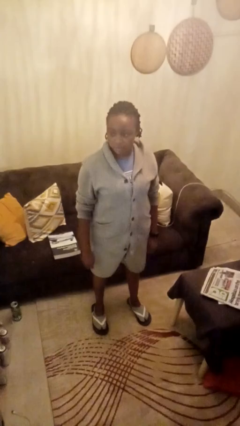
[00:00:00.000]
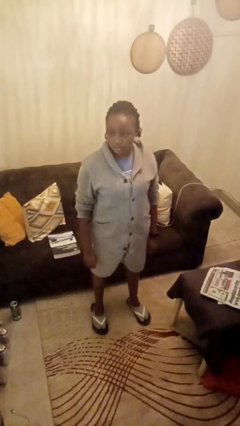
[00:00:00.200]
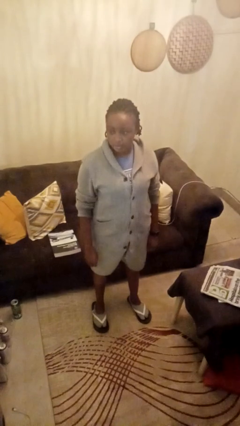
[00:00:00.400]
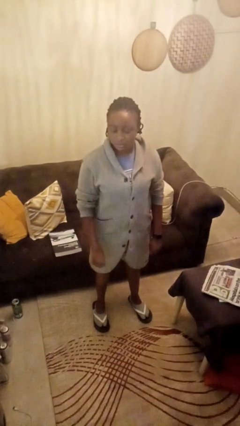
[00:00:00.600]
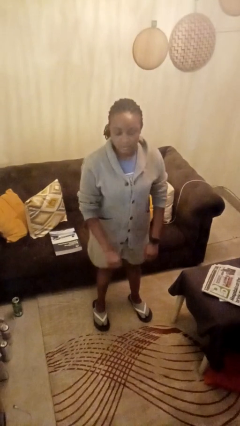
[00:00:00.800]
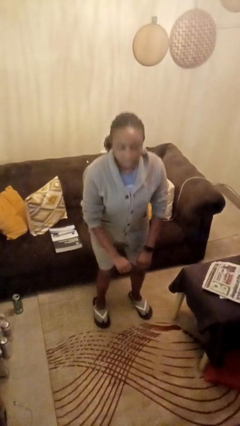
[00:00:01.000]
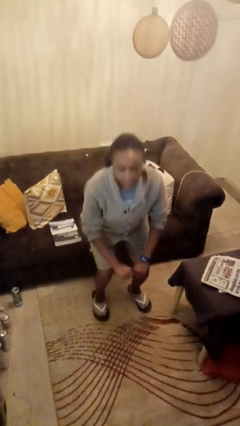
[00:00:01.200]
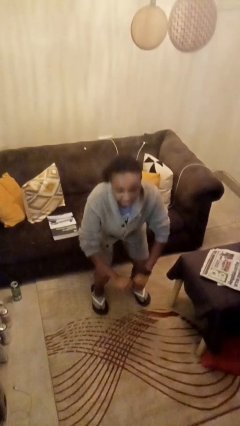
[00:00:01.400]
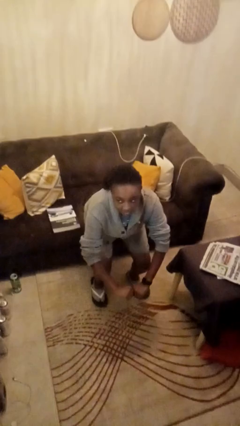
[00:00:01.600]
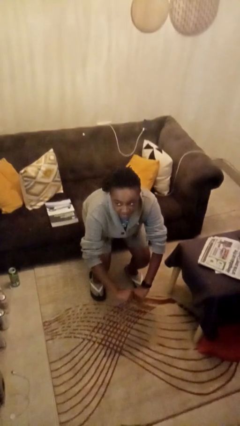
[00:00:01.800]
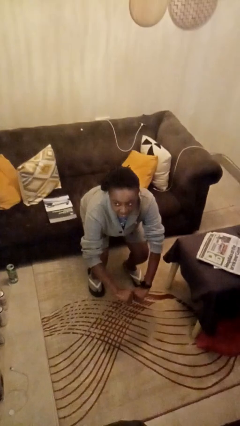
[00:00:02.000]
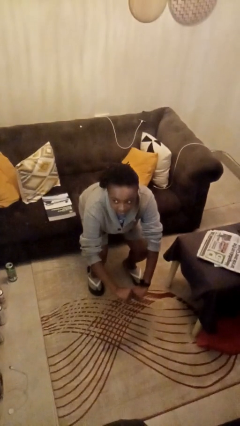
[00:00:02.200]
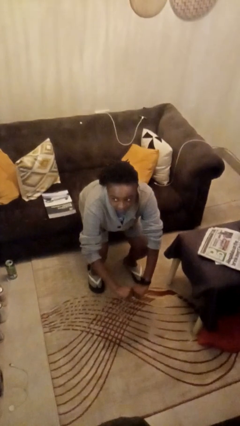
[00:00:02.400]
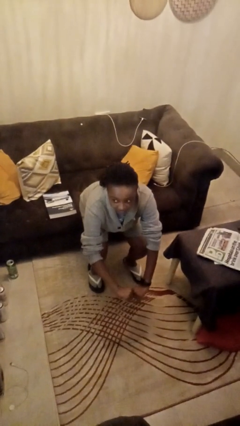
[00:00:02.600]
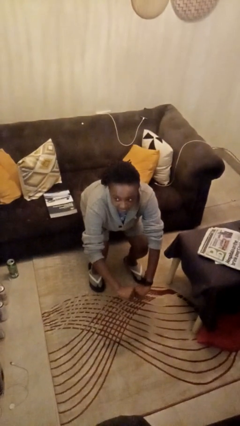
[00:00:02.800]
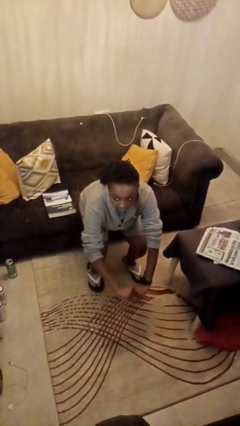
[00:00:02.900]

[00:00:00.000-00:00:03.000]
person squats

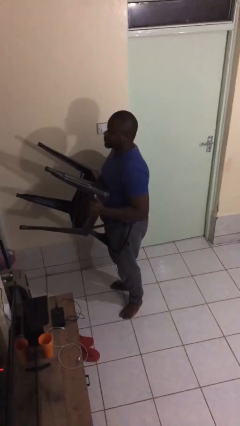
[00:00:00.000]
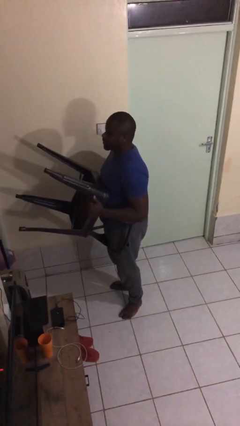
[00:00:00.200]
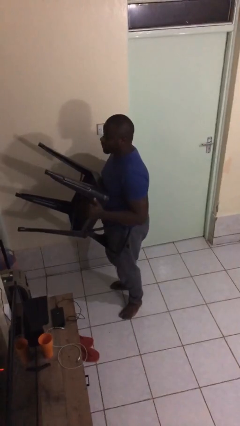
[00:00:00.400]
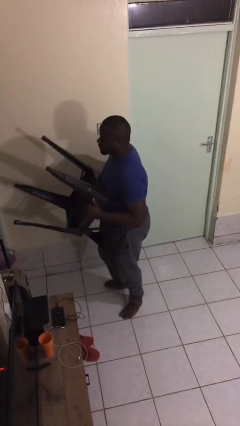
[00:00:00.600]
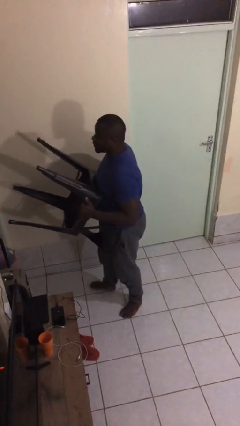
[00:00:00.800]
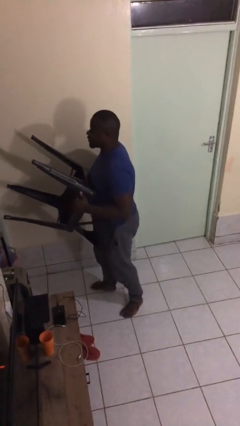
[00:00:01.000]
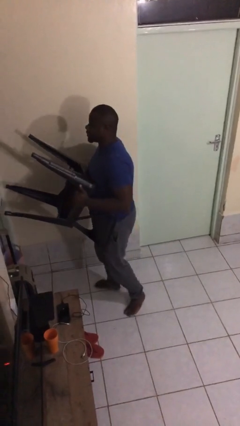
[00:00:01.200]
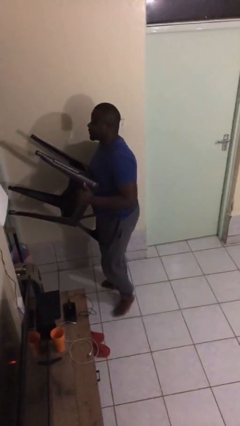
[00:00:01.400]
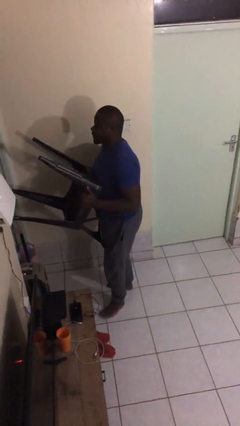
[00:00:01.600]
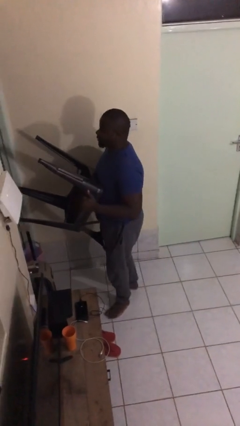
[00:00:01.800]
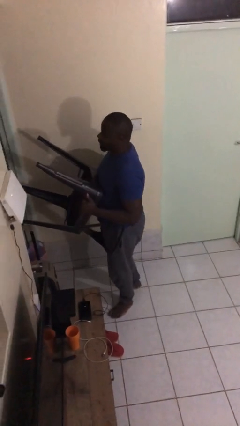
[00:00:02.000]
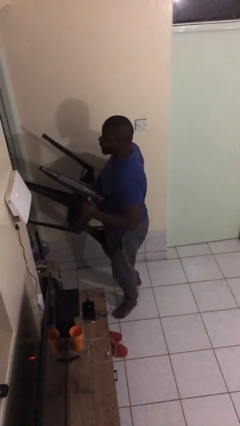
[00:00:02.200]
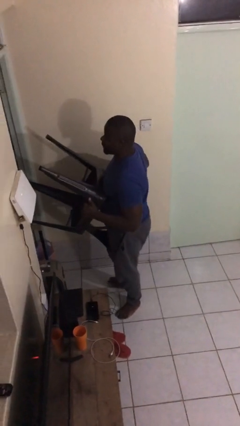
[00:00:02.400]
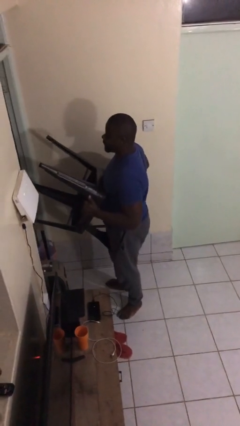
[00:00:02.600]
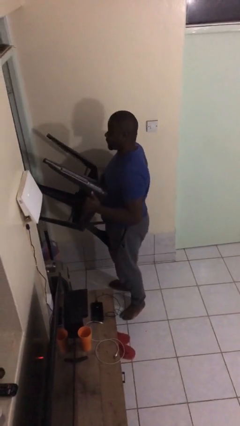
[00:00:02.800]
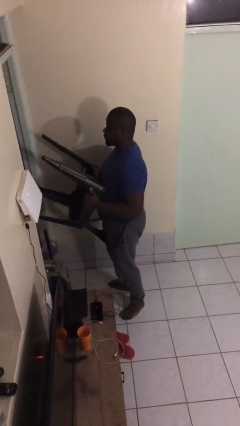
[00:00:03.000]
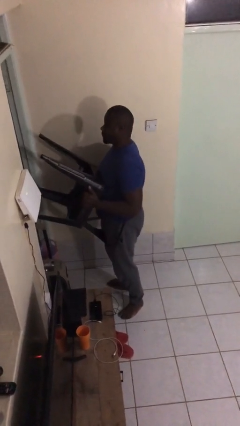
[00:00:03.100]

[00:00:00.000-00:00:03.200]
person carries furniture

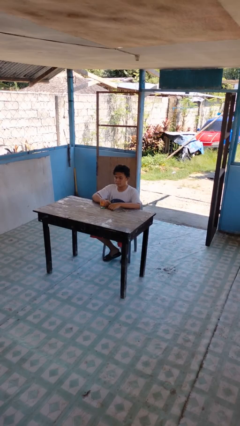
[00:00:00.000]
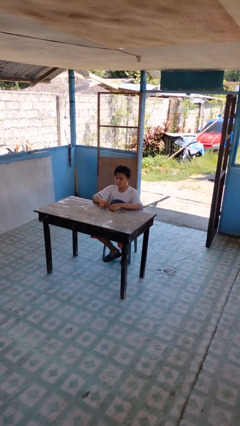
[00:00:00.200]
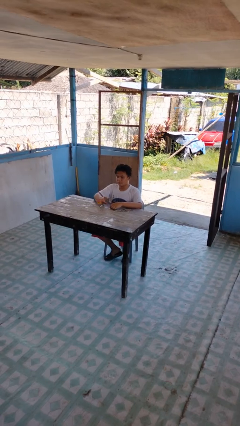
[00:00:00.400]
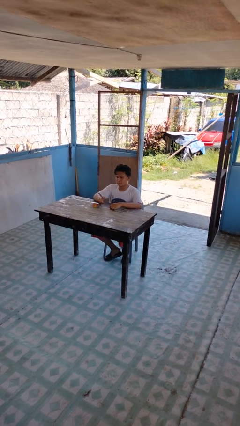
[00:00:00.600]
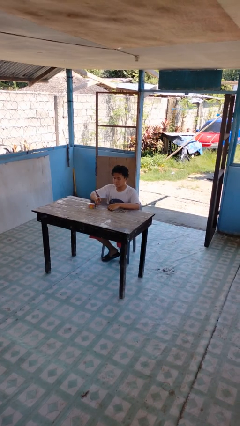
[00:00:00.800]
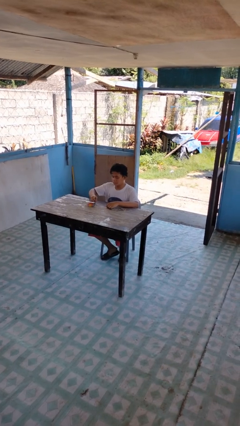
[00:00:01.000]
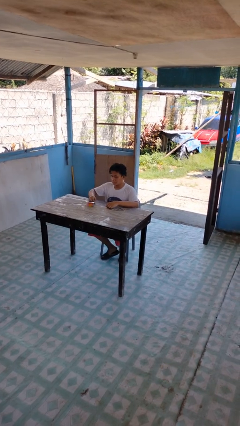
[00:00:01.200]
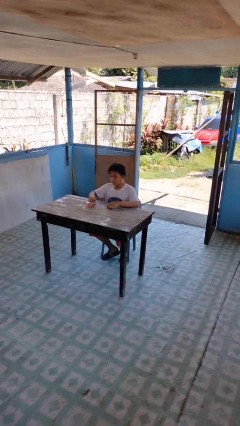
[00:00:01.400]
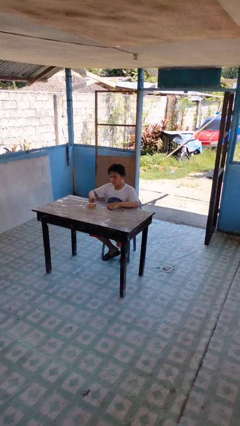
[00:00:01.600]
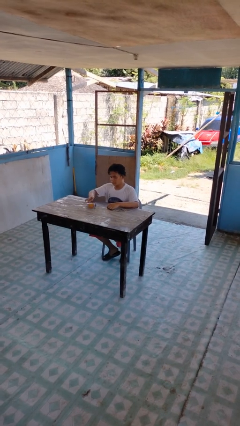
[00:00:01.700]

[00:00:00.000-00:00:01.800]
person knocks over glass

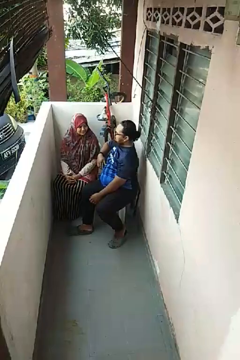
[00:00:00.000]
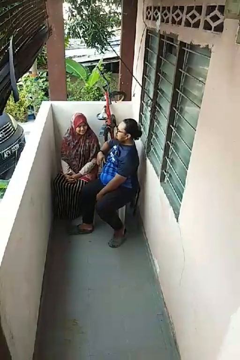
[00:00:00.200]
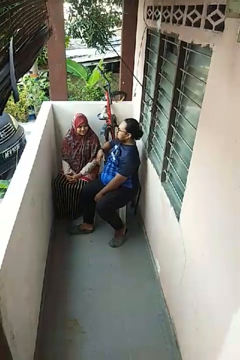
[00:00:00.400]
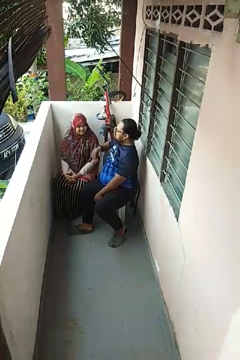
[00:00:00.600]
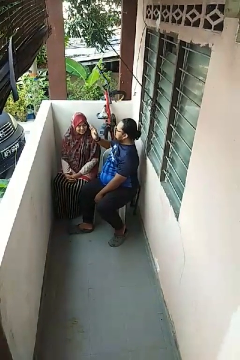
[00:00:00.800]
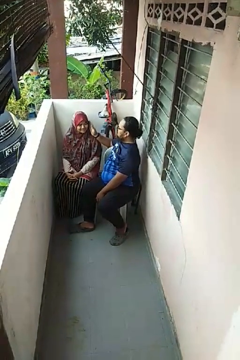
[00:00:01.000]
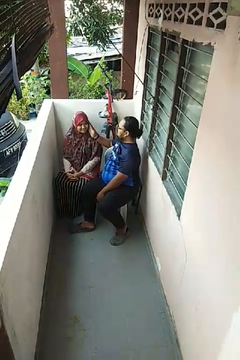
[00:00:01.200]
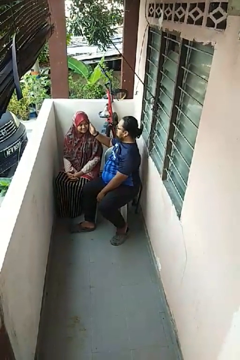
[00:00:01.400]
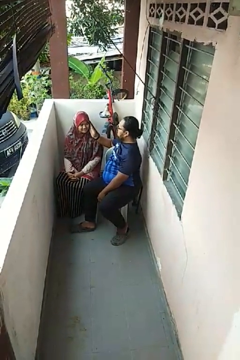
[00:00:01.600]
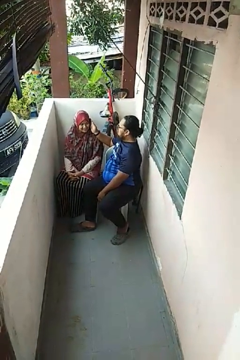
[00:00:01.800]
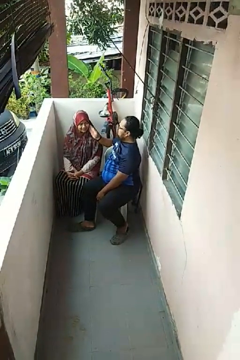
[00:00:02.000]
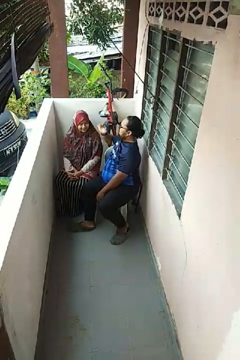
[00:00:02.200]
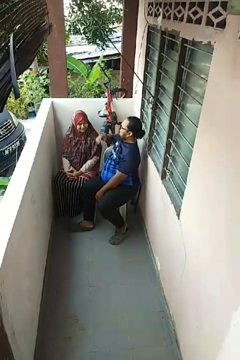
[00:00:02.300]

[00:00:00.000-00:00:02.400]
person touches face of person

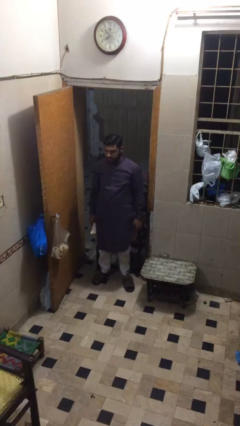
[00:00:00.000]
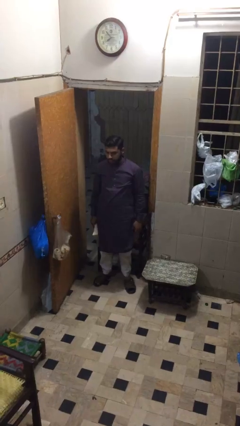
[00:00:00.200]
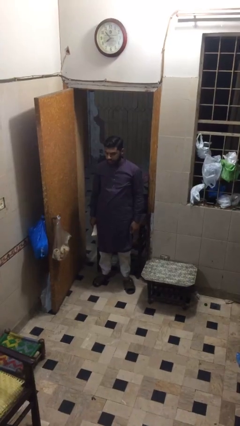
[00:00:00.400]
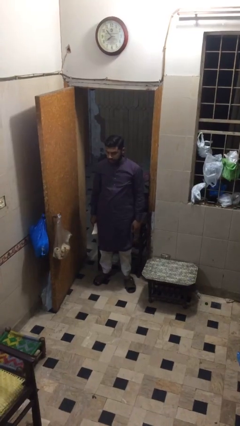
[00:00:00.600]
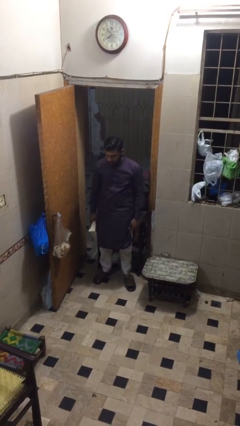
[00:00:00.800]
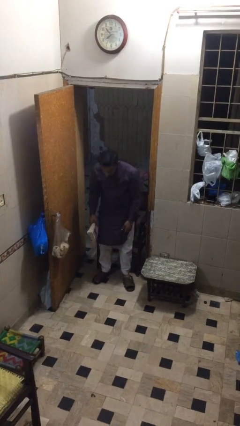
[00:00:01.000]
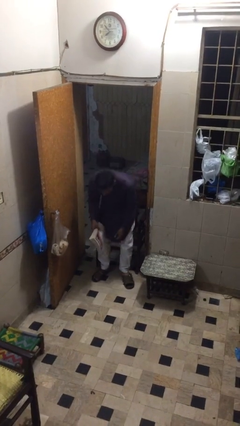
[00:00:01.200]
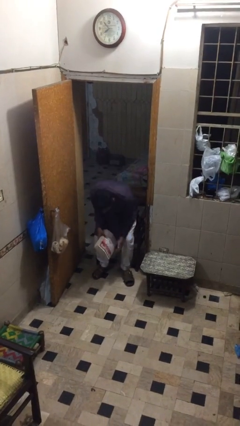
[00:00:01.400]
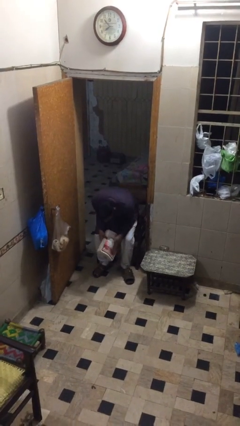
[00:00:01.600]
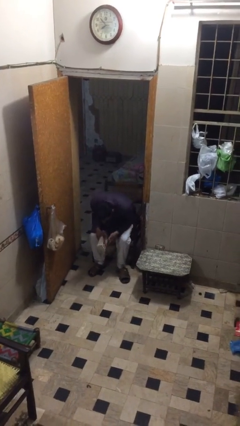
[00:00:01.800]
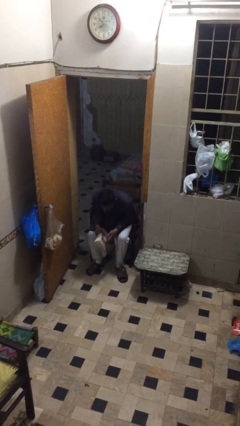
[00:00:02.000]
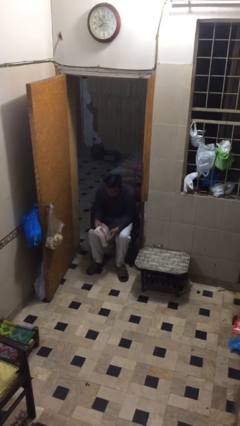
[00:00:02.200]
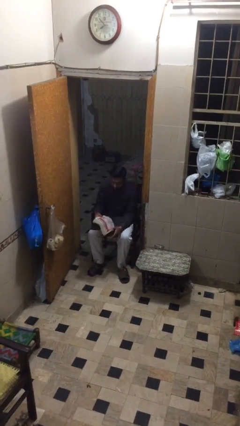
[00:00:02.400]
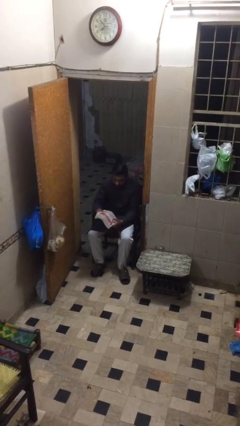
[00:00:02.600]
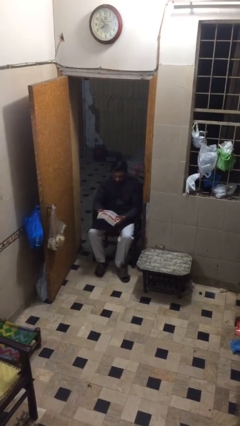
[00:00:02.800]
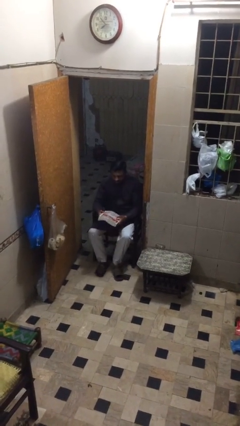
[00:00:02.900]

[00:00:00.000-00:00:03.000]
person sits down

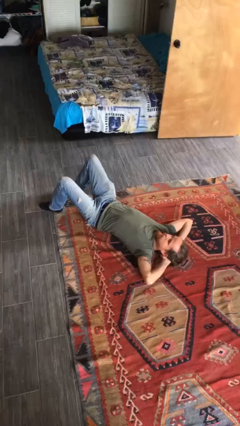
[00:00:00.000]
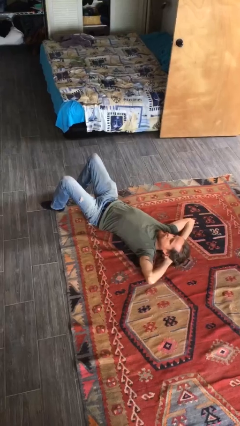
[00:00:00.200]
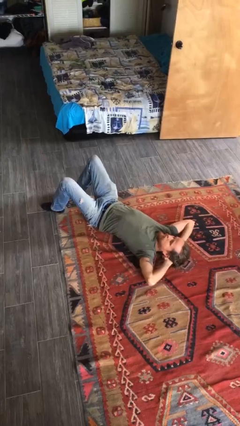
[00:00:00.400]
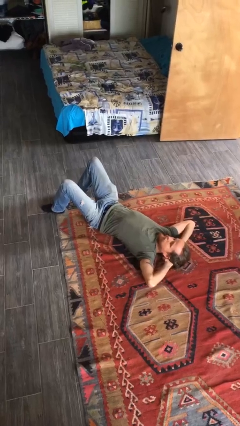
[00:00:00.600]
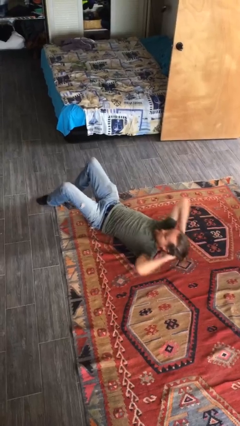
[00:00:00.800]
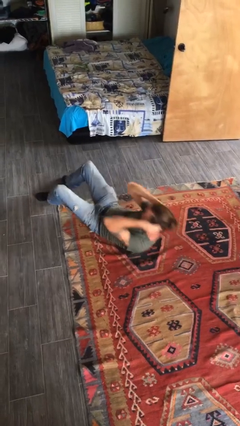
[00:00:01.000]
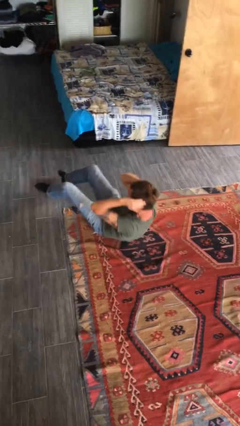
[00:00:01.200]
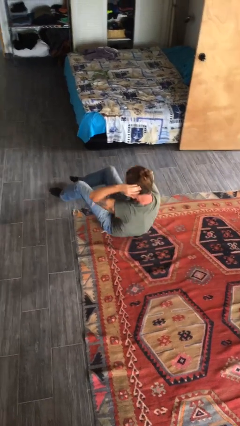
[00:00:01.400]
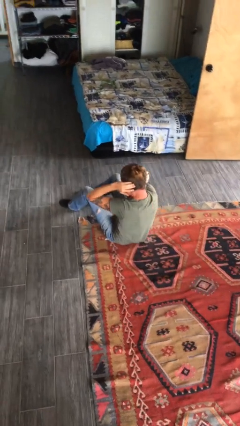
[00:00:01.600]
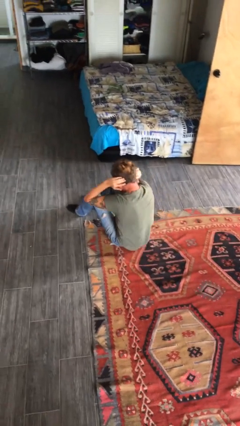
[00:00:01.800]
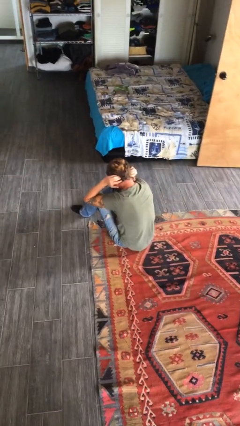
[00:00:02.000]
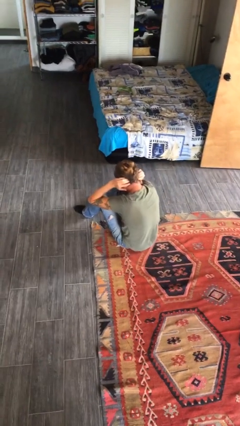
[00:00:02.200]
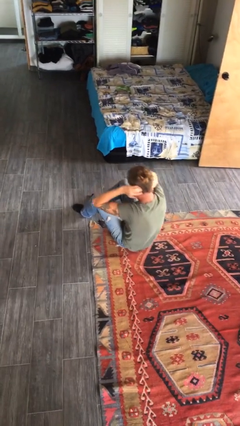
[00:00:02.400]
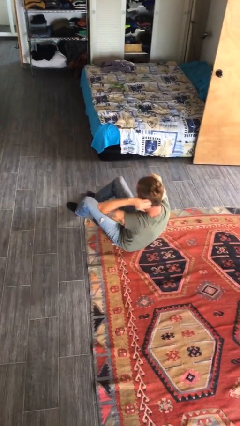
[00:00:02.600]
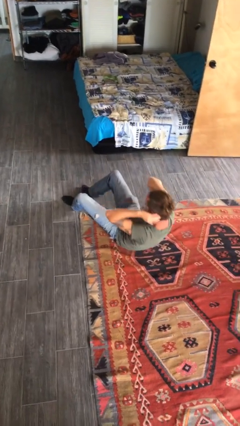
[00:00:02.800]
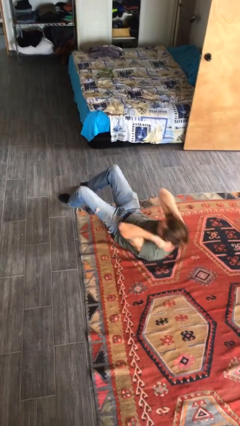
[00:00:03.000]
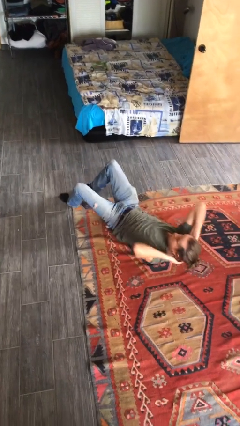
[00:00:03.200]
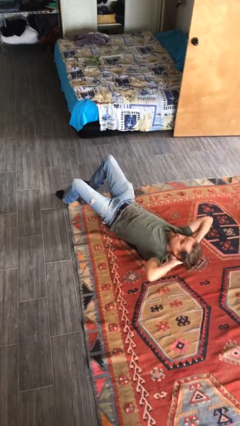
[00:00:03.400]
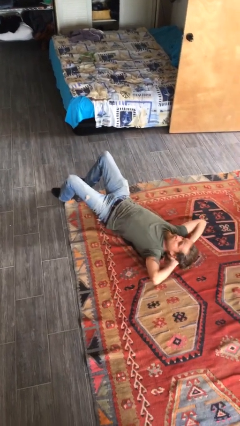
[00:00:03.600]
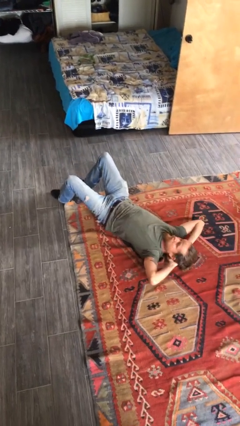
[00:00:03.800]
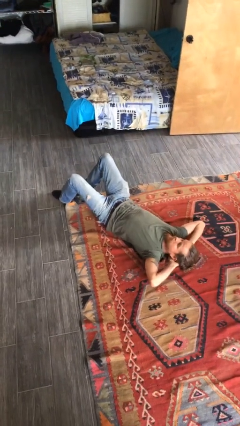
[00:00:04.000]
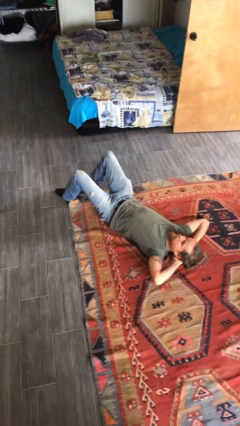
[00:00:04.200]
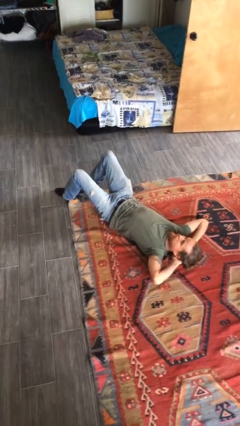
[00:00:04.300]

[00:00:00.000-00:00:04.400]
person exercises with situp
